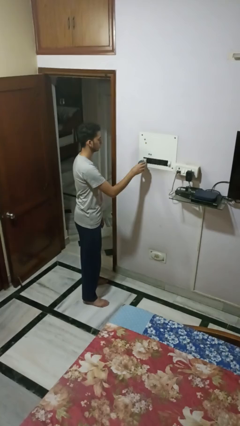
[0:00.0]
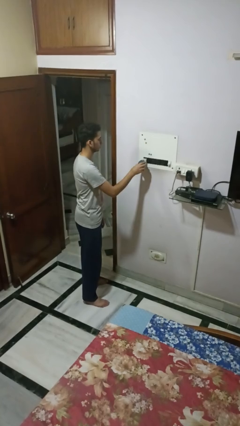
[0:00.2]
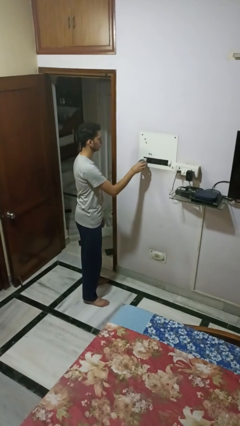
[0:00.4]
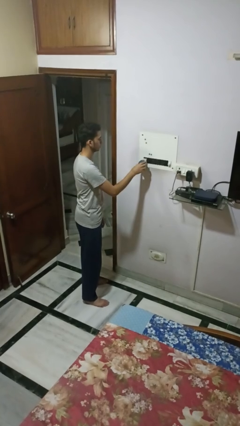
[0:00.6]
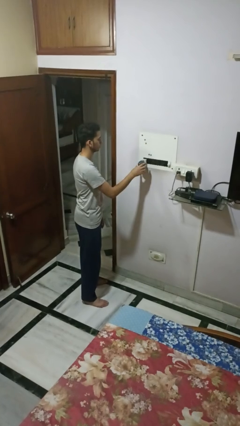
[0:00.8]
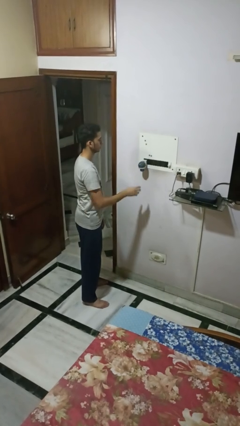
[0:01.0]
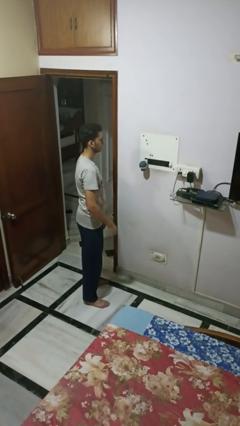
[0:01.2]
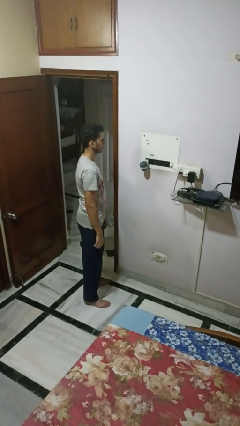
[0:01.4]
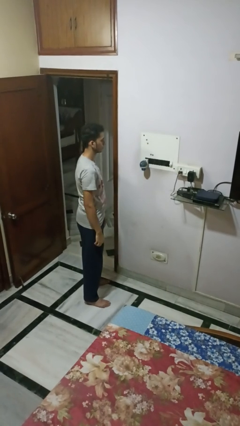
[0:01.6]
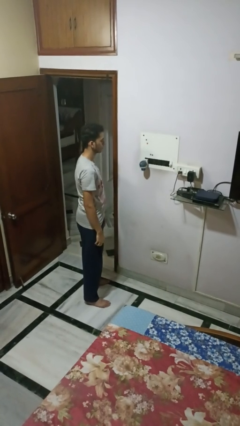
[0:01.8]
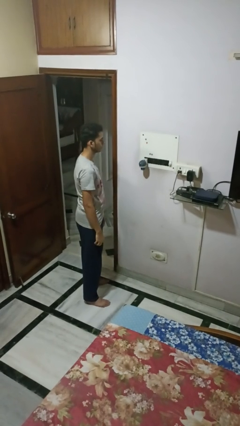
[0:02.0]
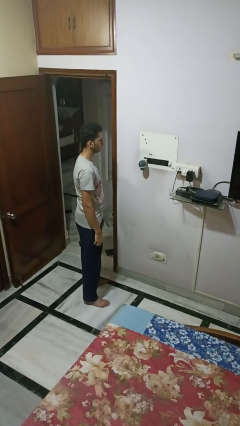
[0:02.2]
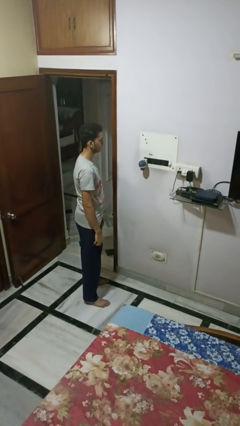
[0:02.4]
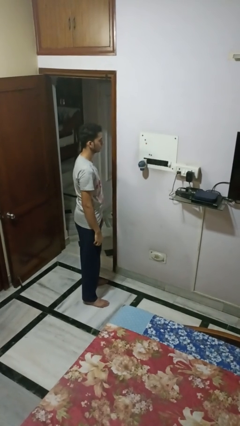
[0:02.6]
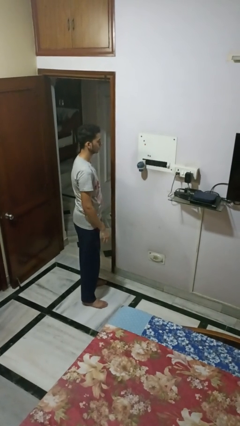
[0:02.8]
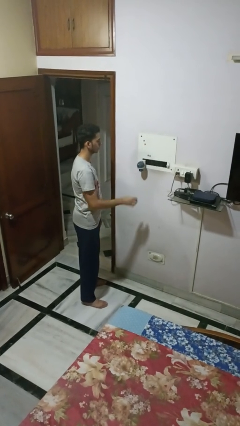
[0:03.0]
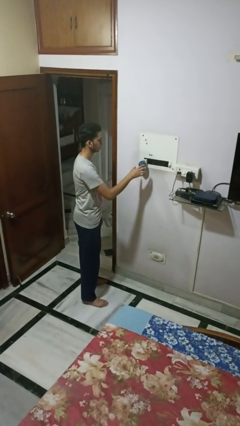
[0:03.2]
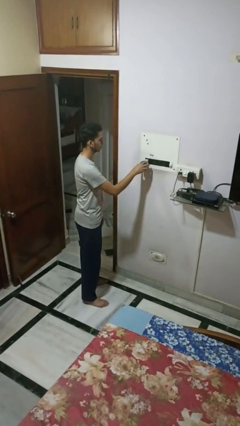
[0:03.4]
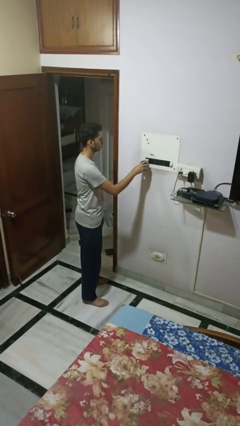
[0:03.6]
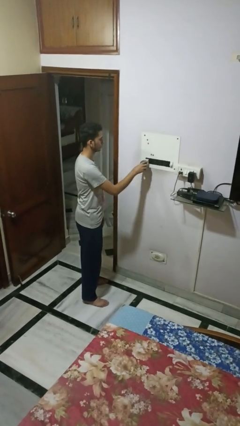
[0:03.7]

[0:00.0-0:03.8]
person plugs into electrical socket

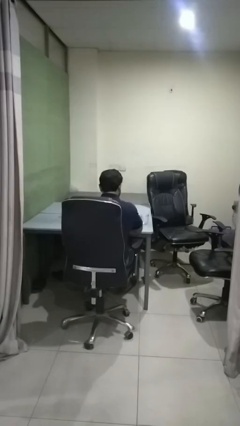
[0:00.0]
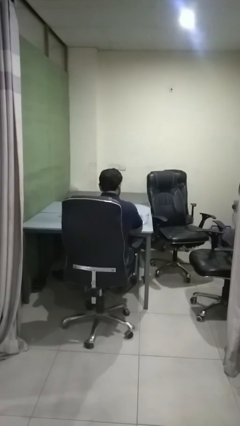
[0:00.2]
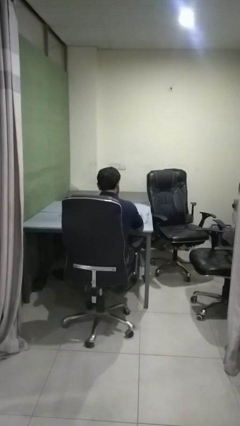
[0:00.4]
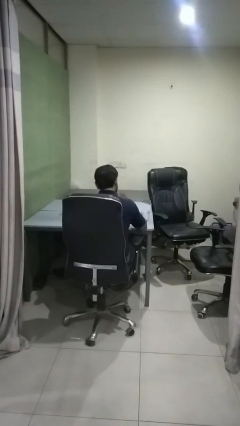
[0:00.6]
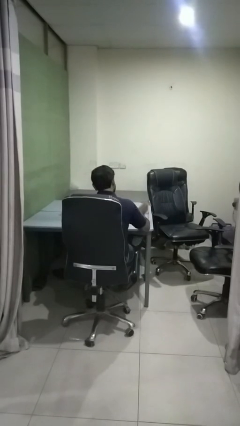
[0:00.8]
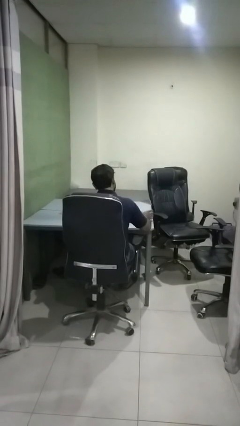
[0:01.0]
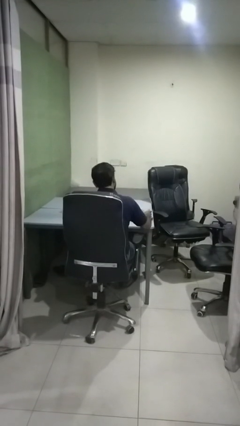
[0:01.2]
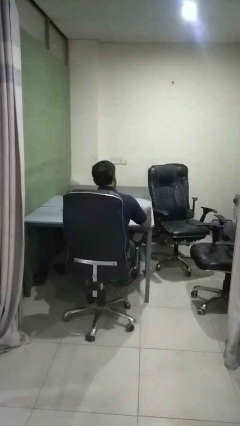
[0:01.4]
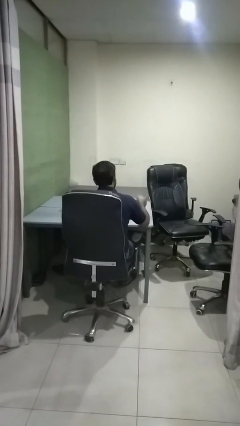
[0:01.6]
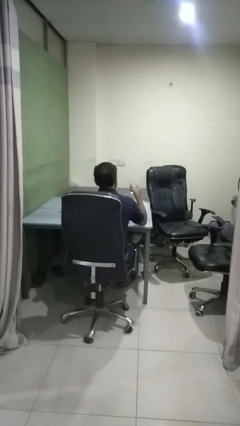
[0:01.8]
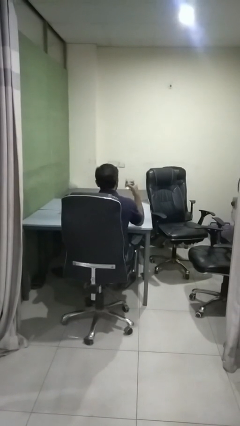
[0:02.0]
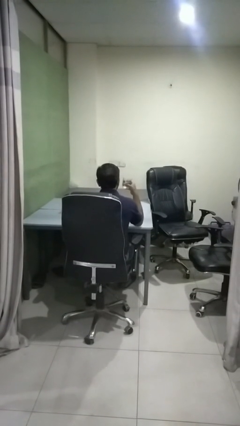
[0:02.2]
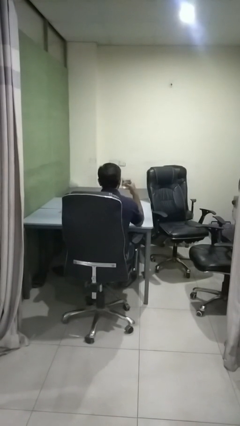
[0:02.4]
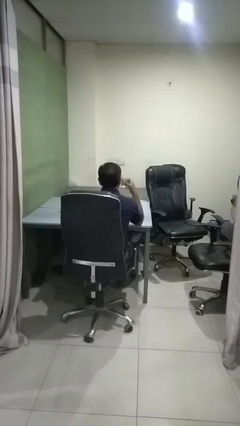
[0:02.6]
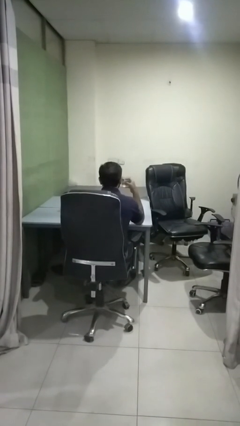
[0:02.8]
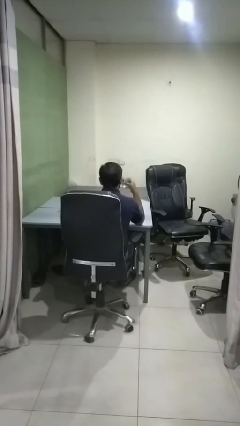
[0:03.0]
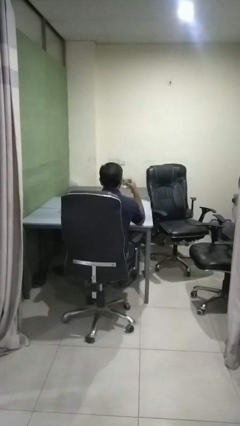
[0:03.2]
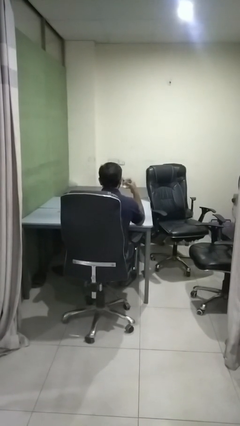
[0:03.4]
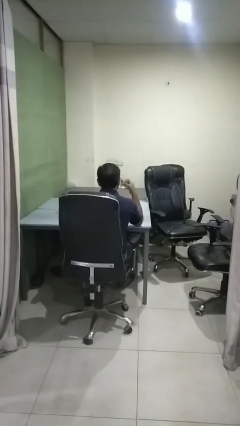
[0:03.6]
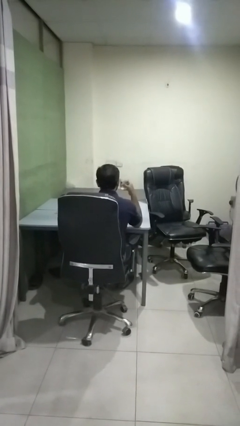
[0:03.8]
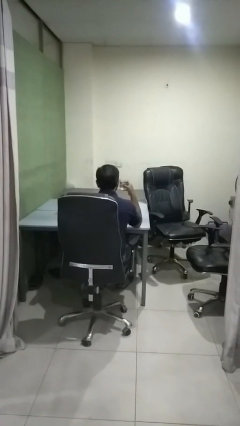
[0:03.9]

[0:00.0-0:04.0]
person picks up object from table

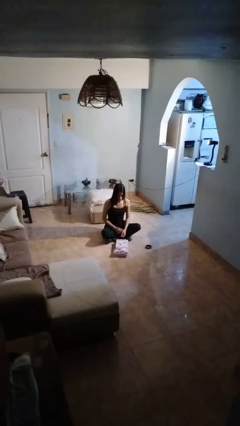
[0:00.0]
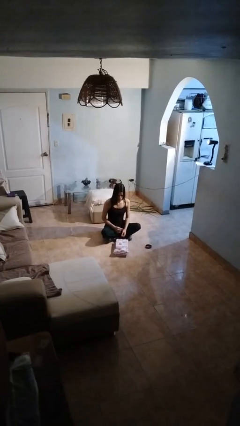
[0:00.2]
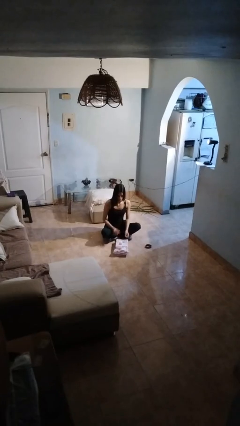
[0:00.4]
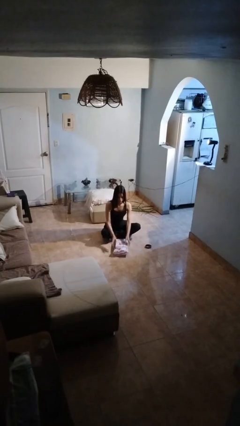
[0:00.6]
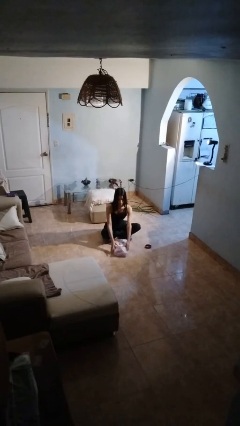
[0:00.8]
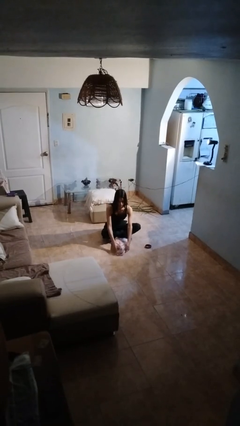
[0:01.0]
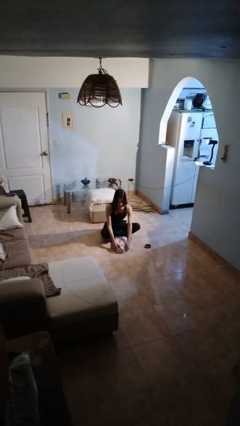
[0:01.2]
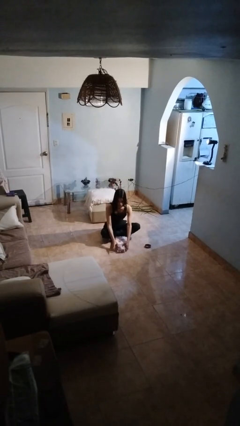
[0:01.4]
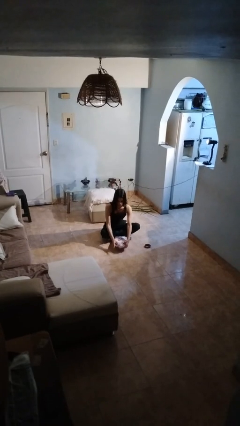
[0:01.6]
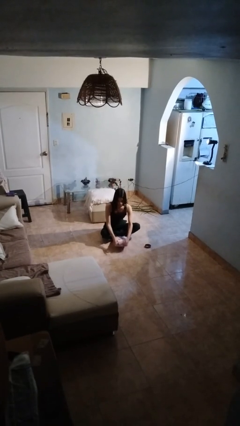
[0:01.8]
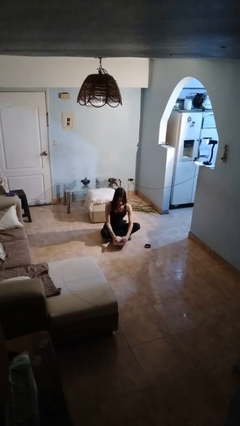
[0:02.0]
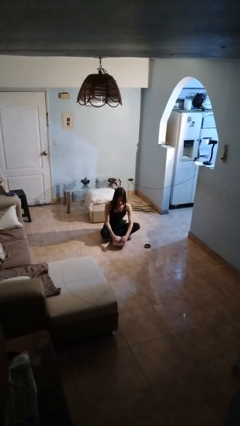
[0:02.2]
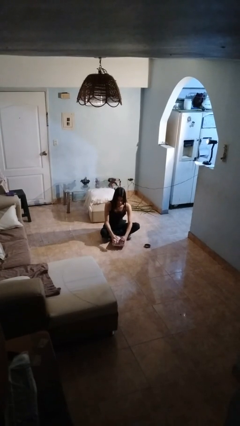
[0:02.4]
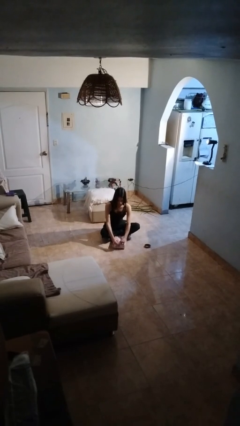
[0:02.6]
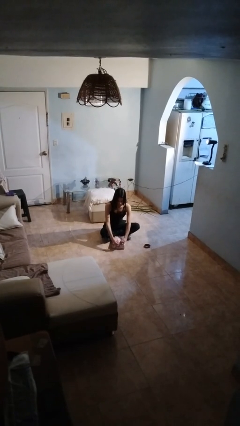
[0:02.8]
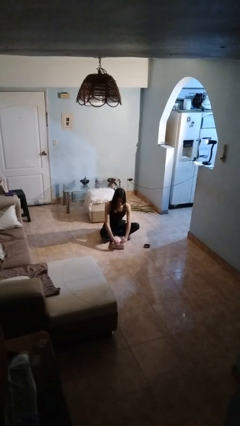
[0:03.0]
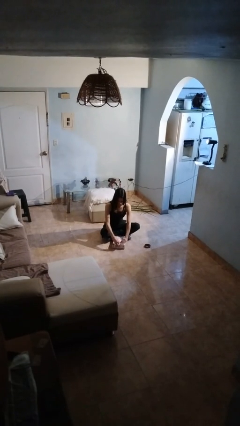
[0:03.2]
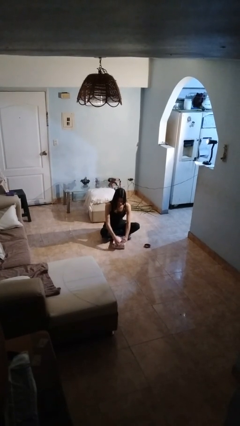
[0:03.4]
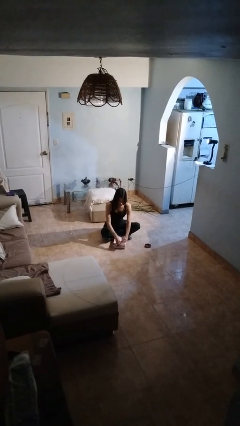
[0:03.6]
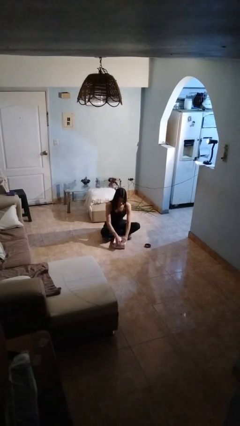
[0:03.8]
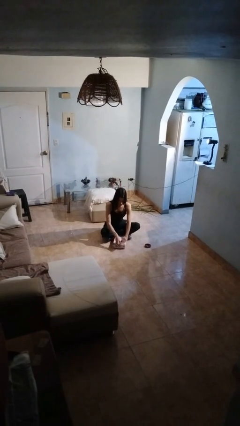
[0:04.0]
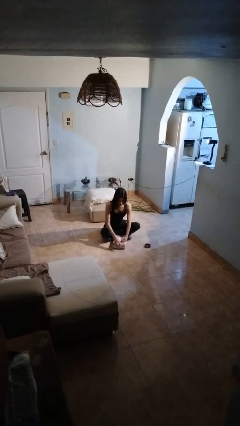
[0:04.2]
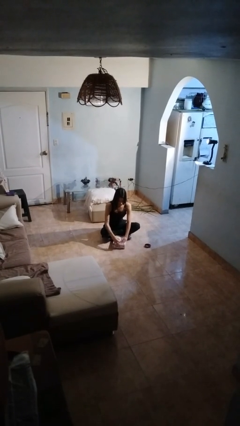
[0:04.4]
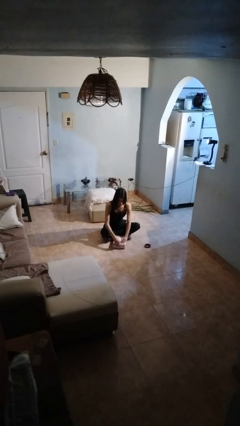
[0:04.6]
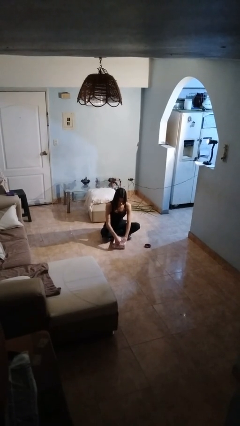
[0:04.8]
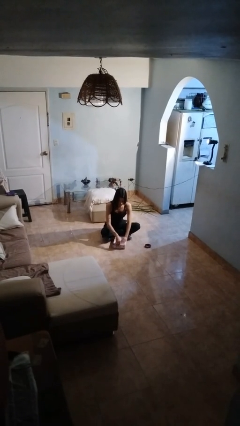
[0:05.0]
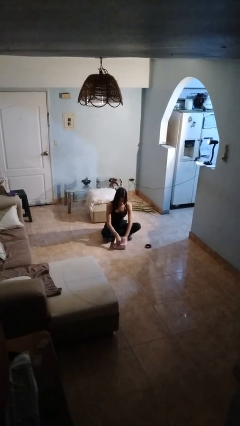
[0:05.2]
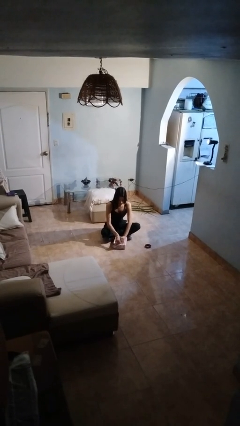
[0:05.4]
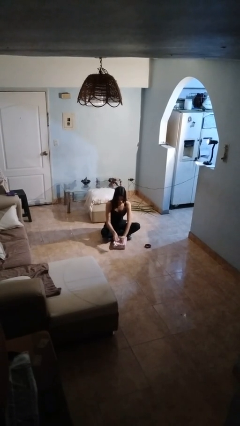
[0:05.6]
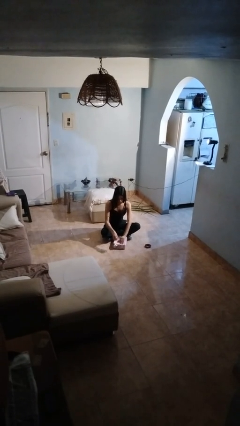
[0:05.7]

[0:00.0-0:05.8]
person wraps box

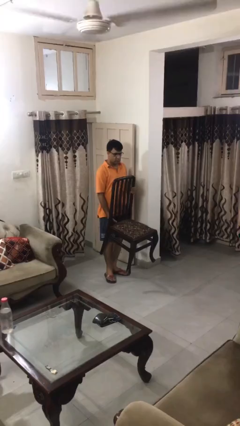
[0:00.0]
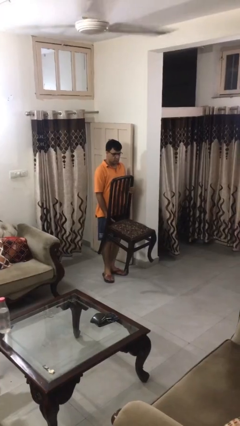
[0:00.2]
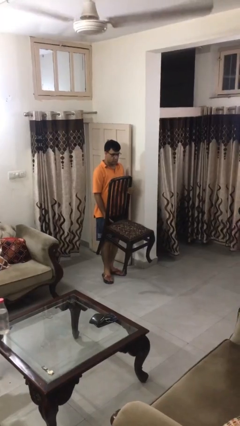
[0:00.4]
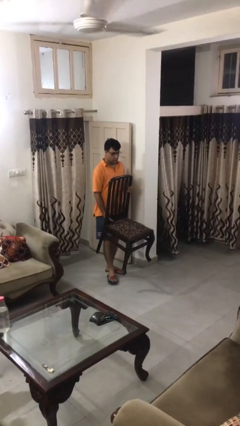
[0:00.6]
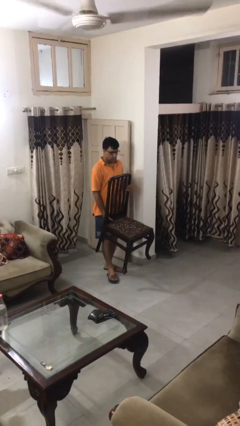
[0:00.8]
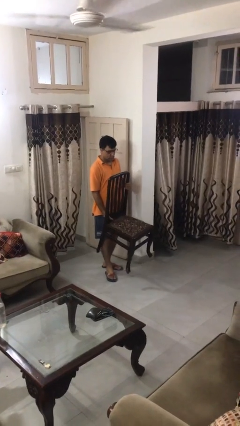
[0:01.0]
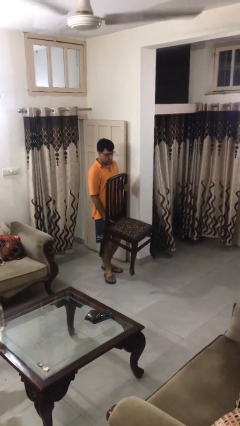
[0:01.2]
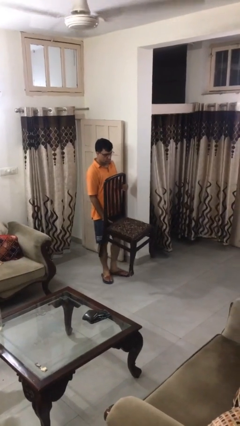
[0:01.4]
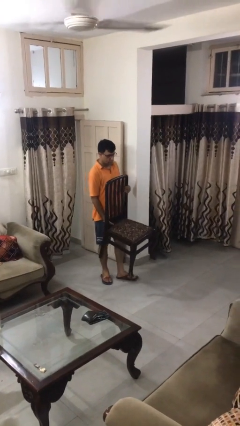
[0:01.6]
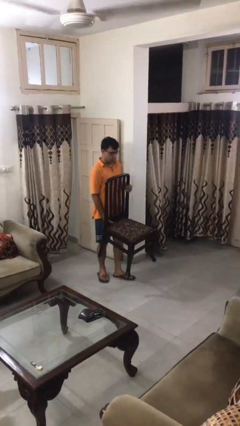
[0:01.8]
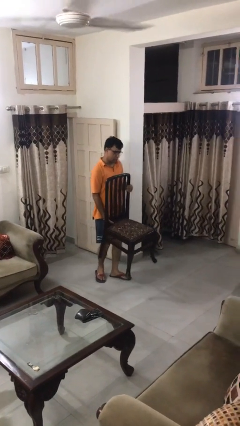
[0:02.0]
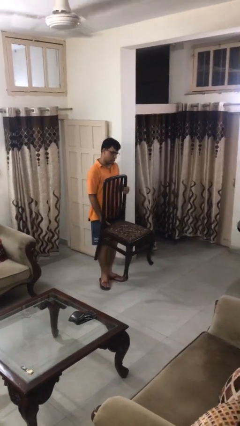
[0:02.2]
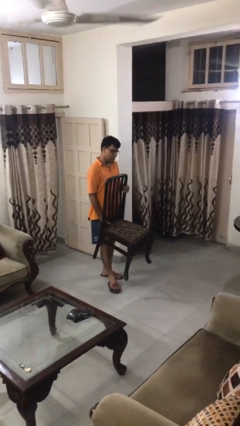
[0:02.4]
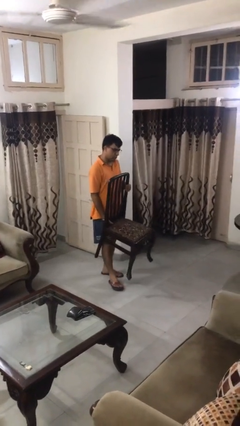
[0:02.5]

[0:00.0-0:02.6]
person carries furniture

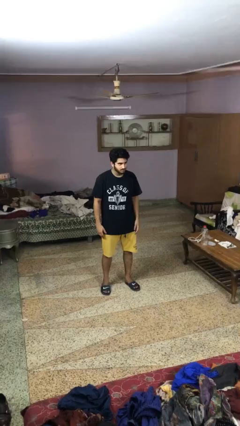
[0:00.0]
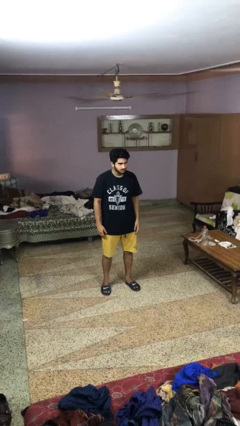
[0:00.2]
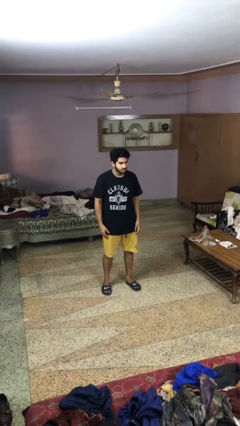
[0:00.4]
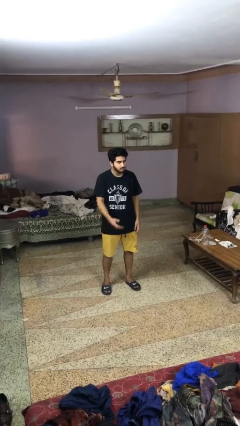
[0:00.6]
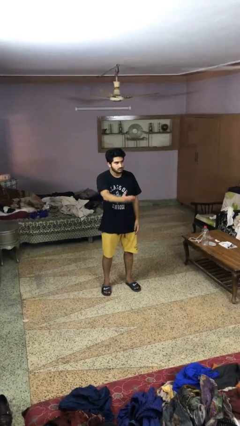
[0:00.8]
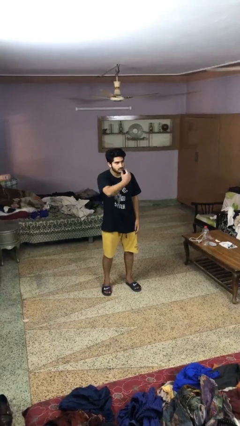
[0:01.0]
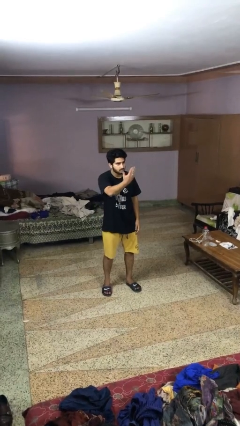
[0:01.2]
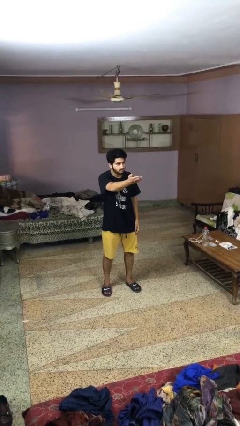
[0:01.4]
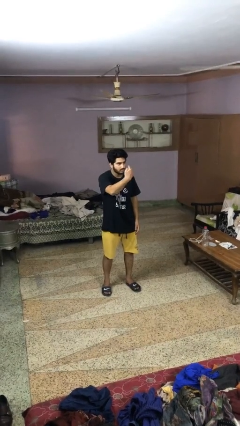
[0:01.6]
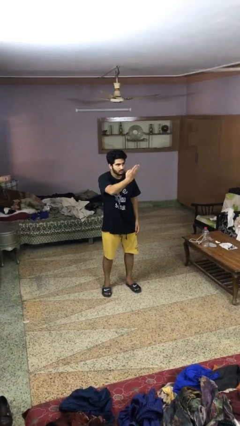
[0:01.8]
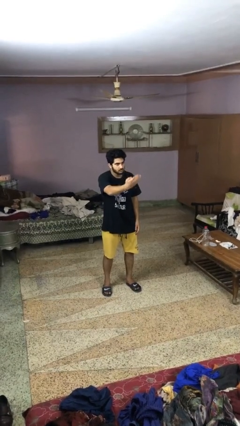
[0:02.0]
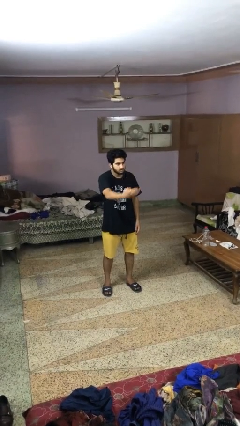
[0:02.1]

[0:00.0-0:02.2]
person gestures come here
